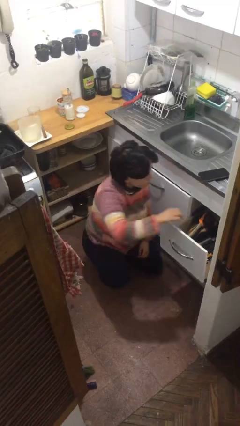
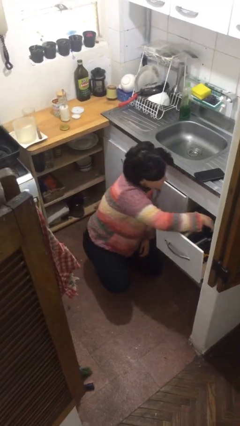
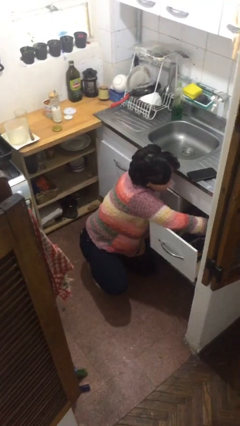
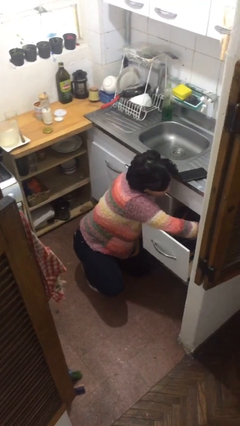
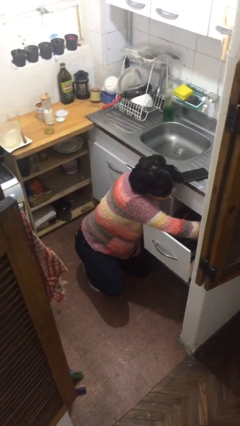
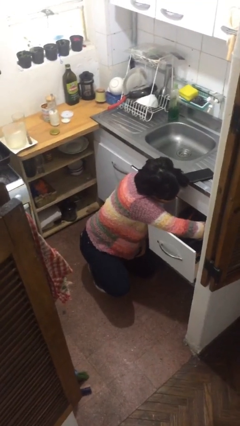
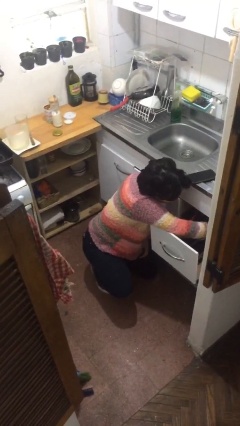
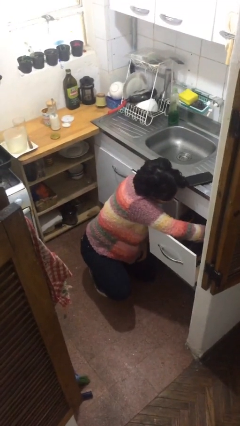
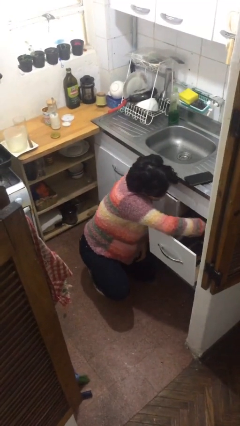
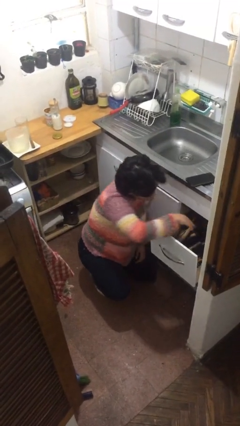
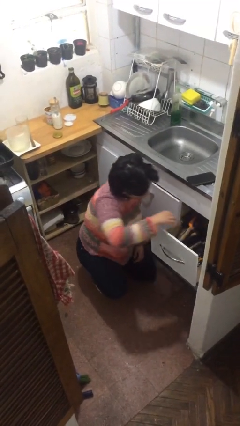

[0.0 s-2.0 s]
person searches in kitchen drawer

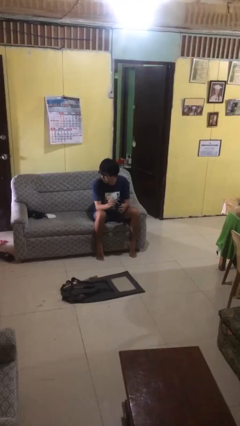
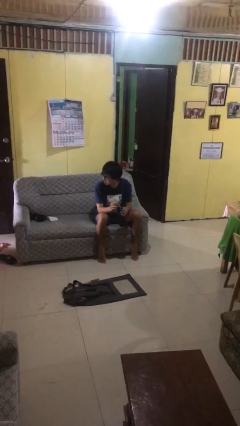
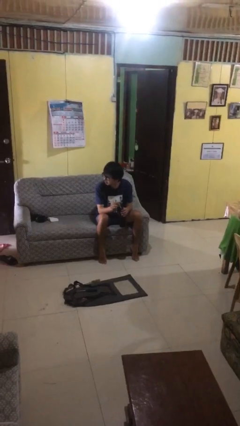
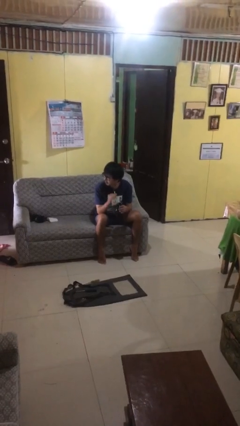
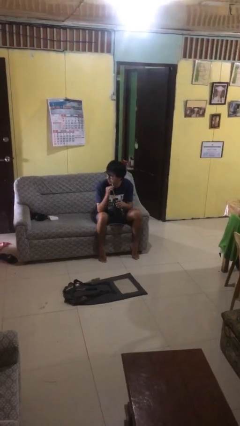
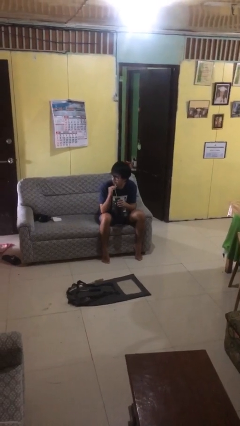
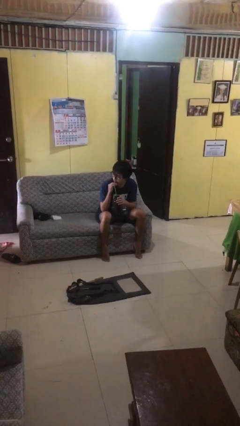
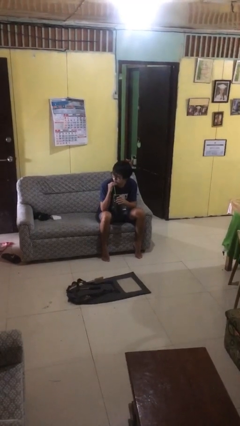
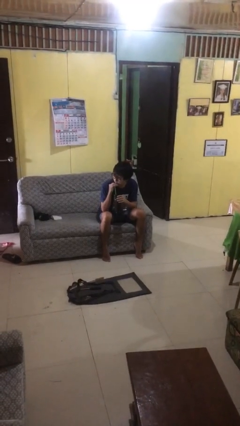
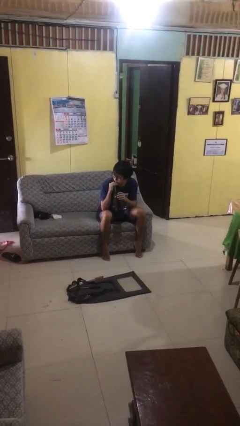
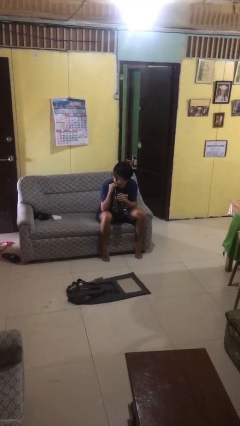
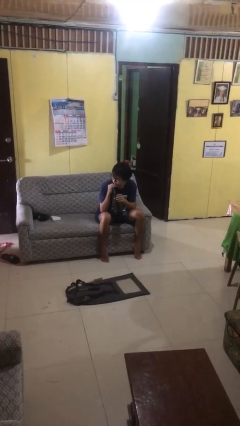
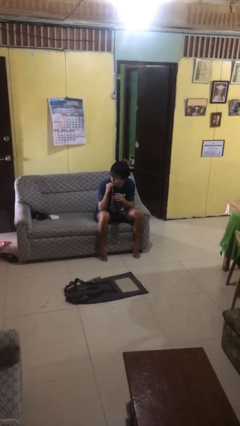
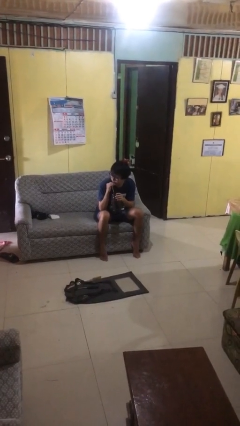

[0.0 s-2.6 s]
person drinks from straw

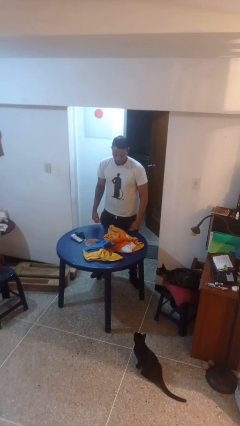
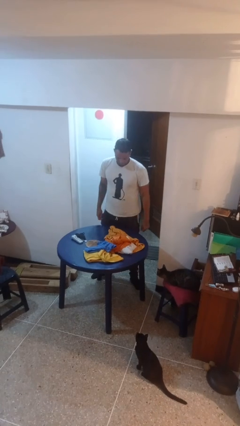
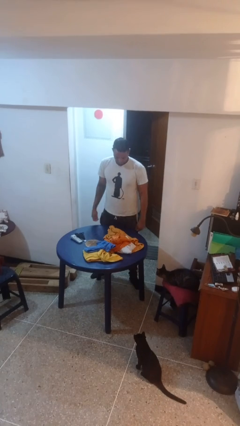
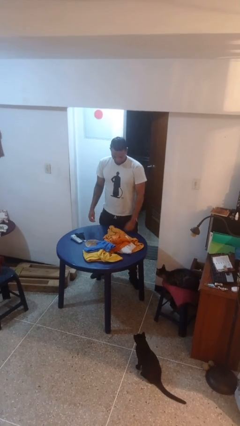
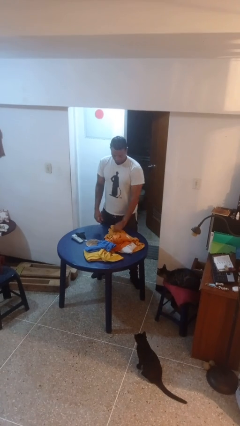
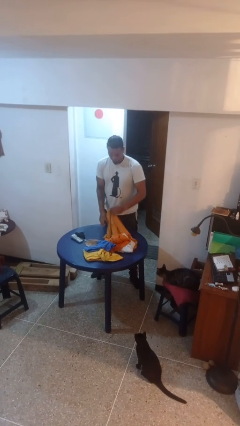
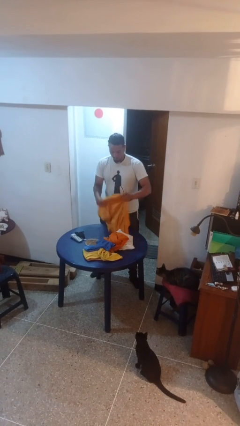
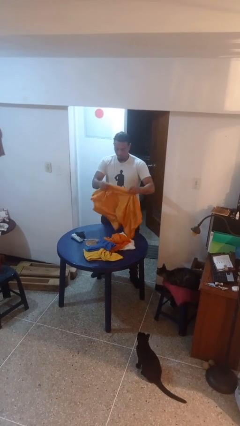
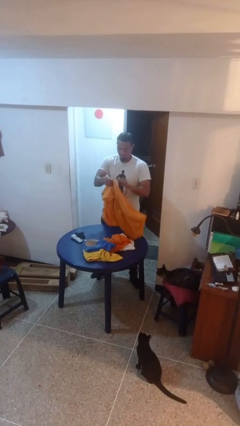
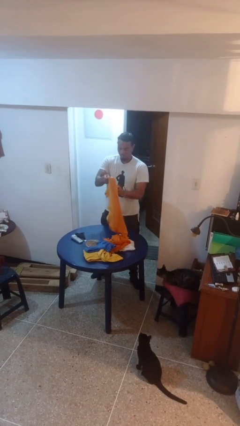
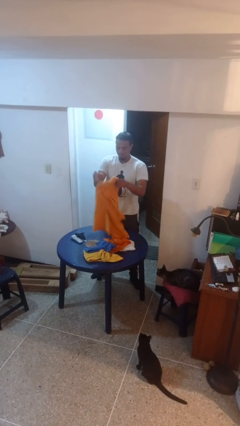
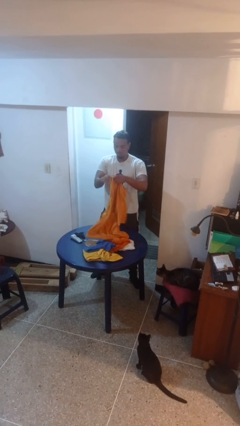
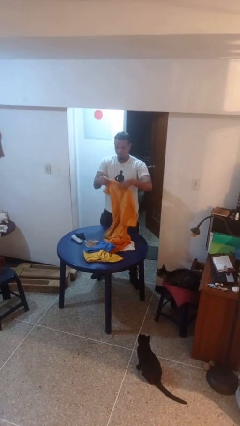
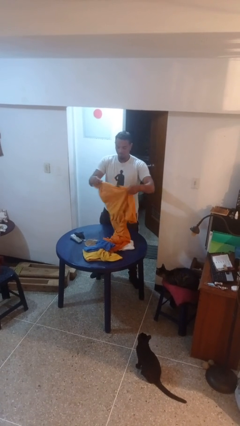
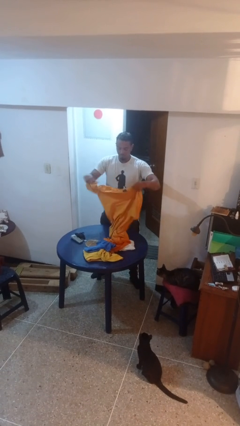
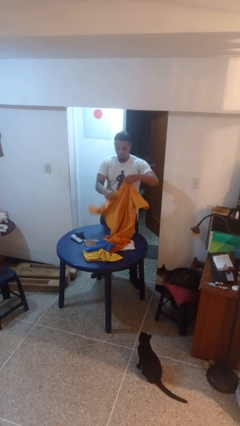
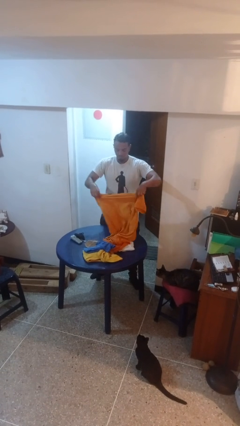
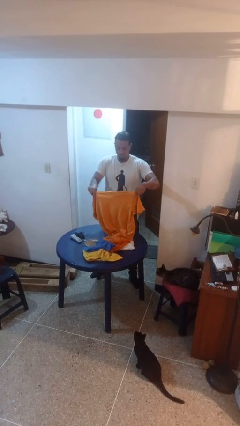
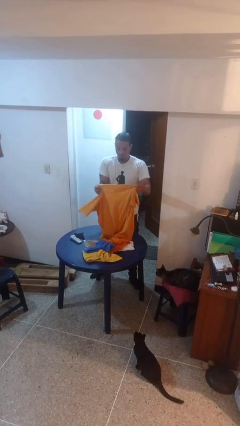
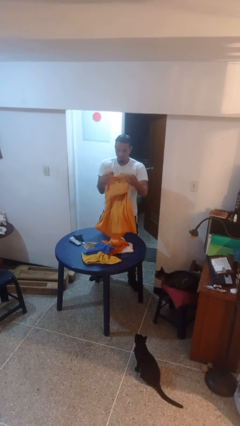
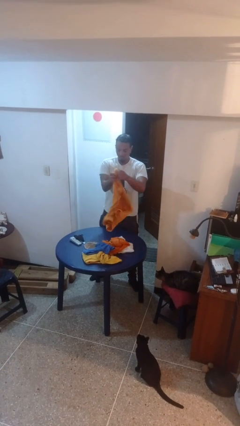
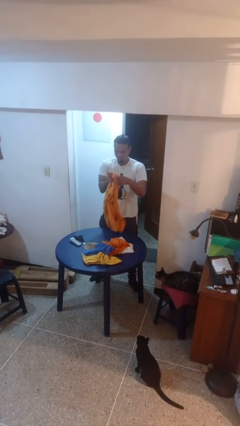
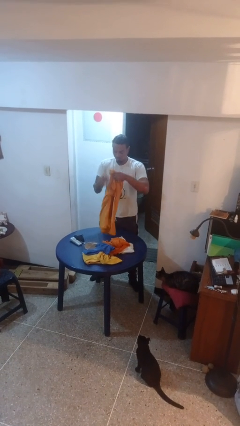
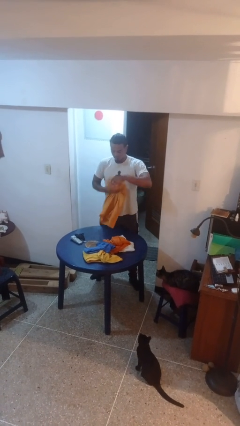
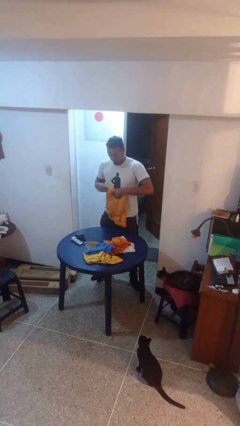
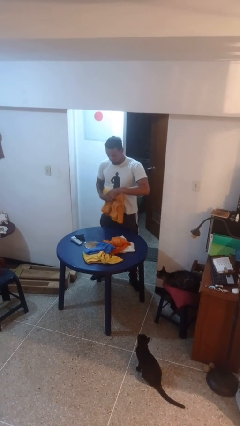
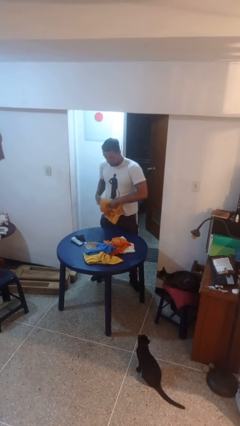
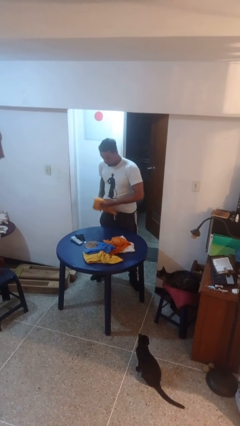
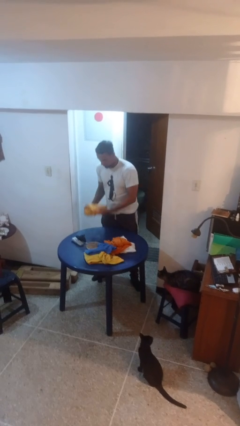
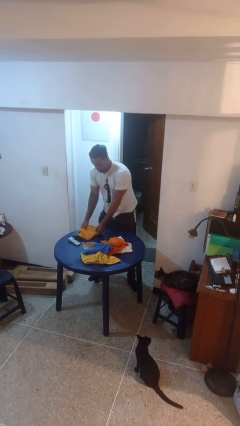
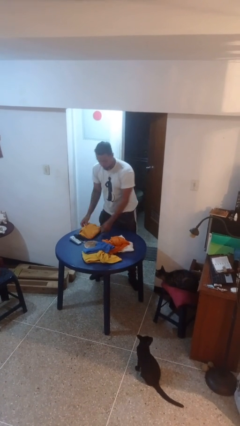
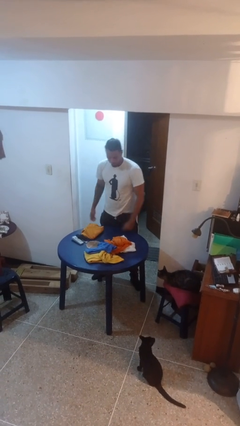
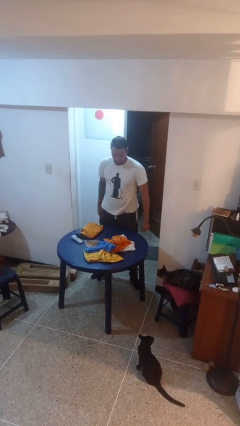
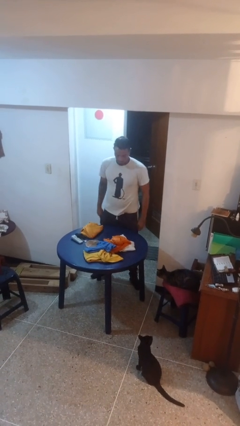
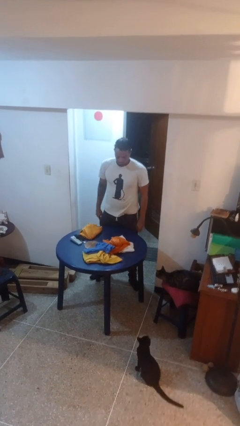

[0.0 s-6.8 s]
person folds shirt

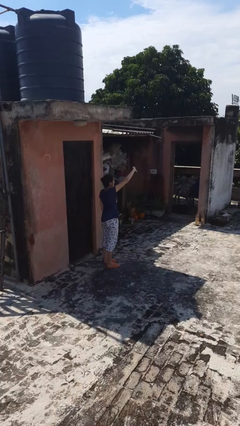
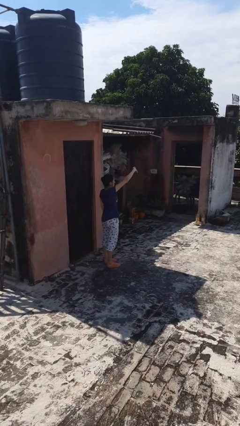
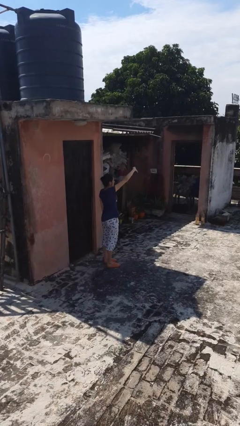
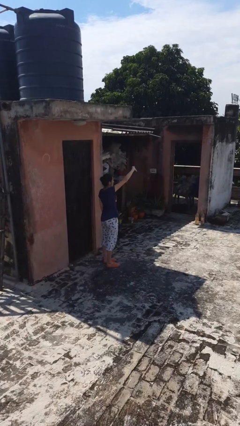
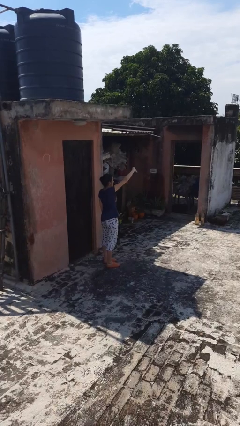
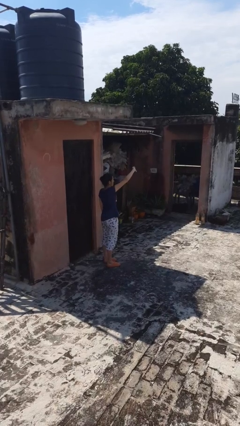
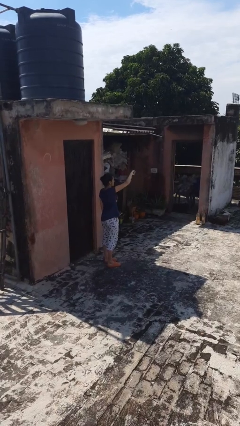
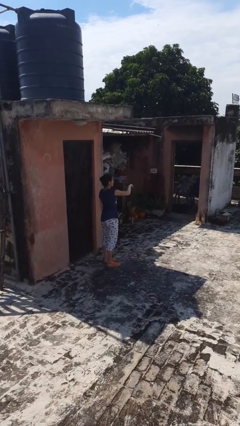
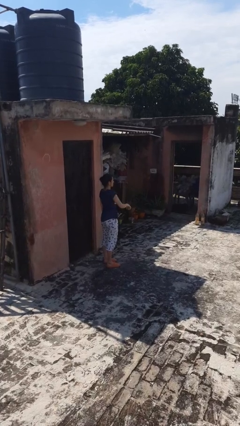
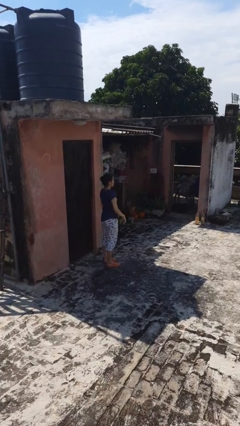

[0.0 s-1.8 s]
person gestures thumbs down

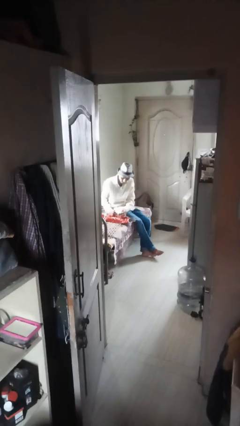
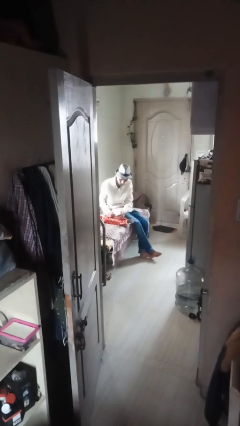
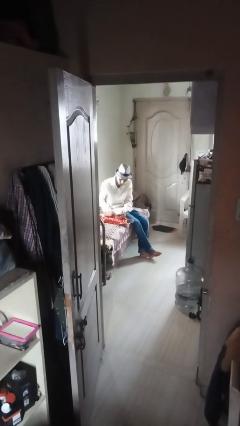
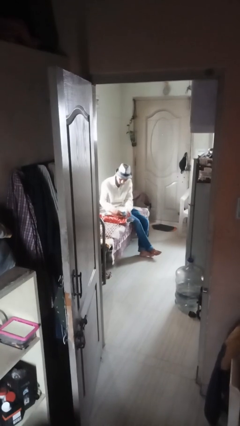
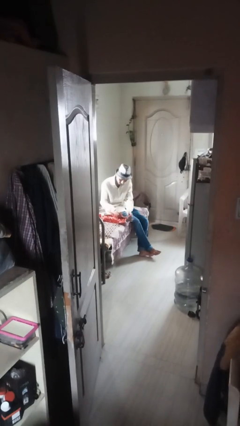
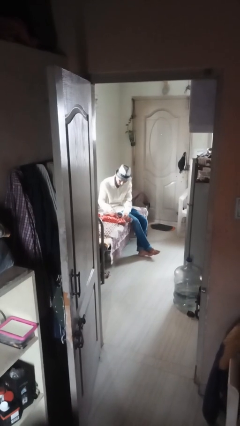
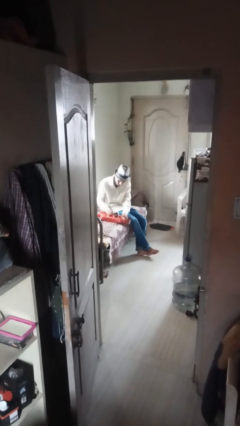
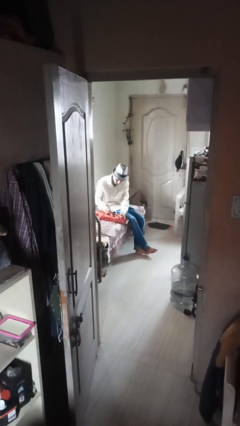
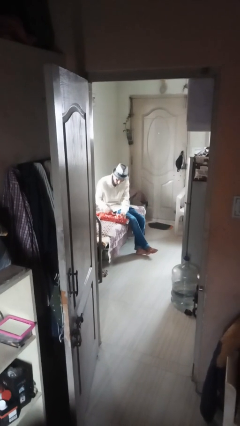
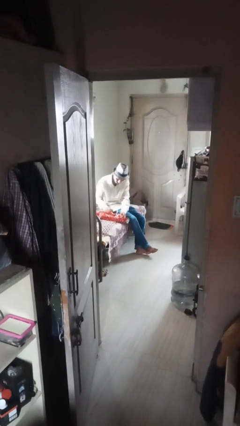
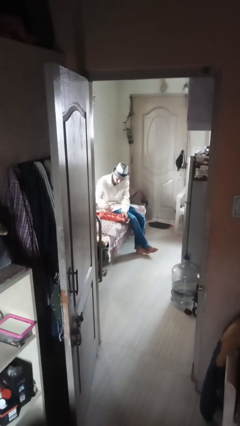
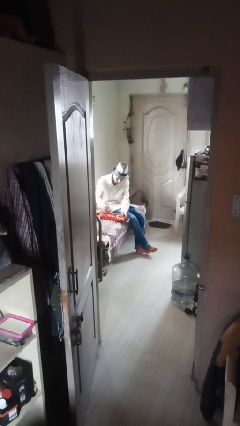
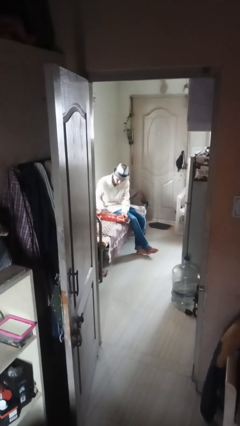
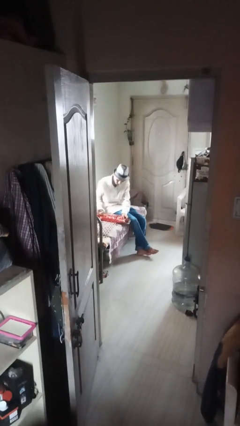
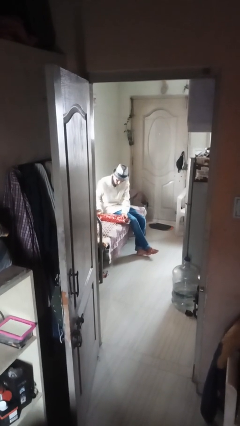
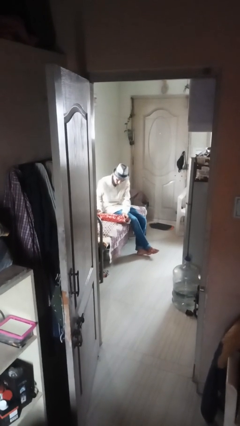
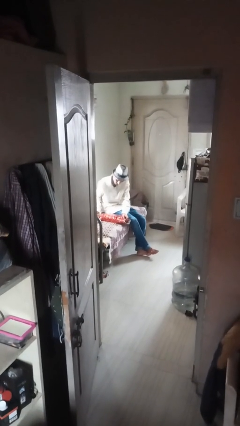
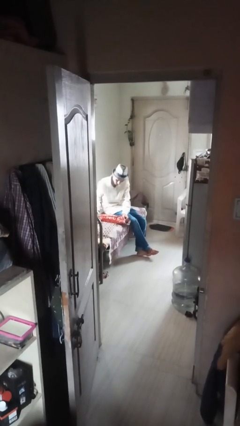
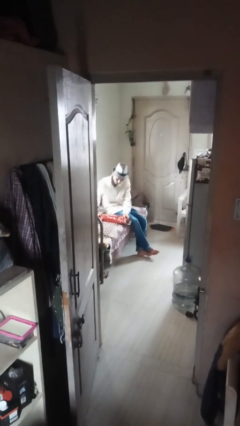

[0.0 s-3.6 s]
person wraps box

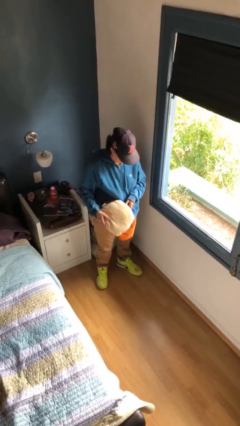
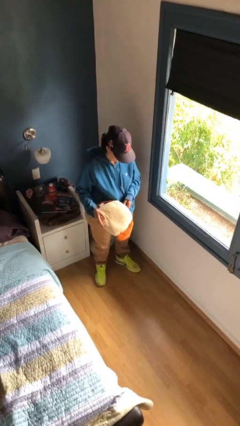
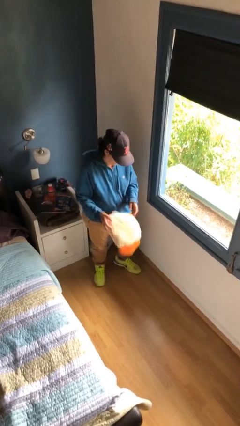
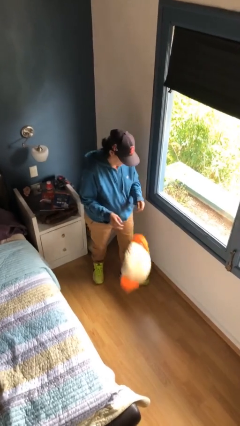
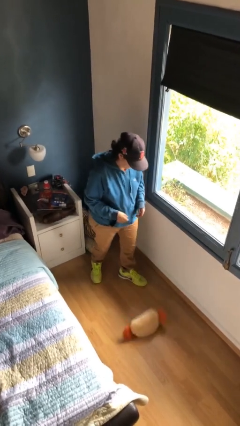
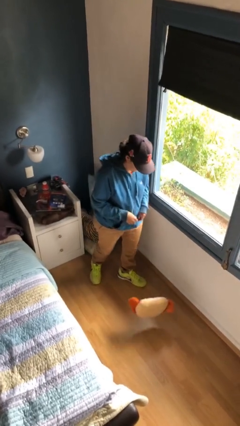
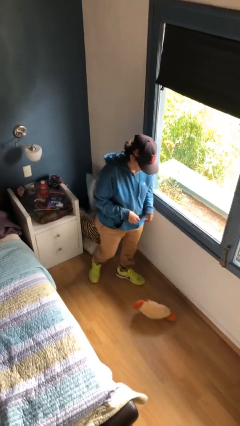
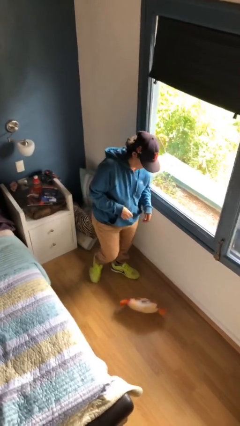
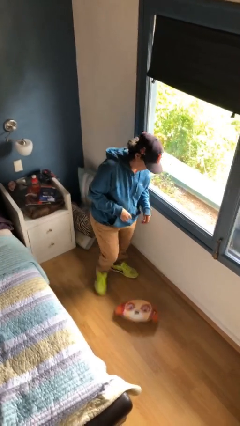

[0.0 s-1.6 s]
person drops object
